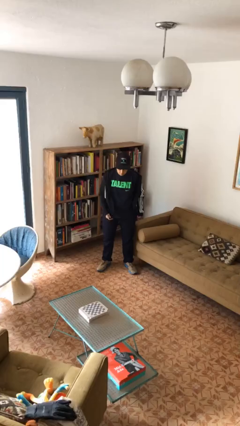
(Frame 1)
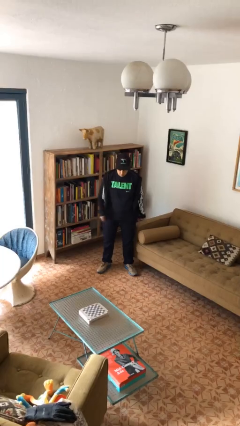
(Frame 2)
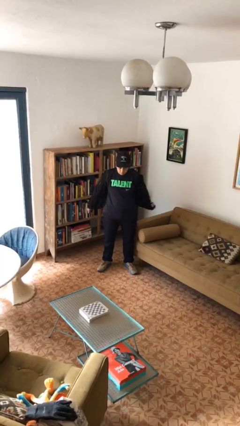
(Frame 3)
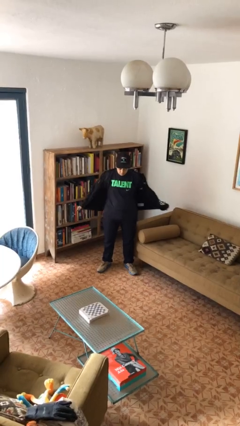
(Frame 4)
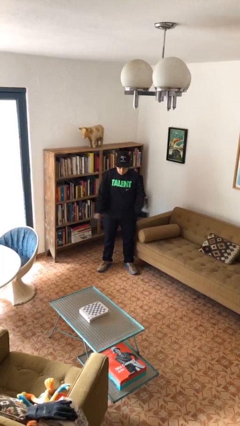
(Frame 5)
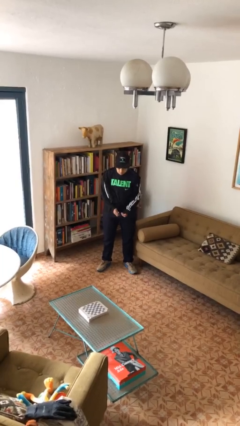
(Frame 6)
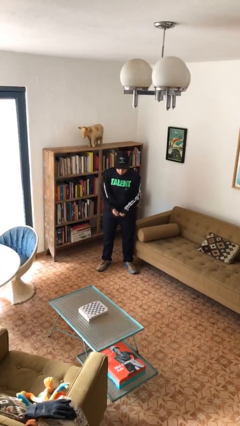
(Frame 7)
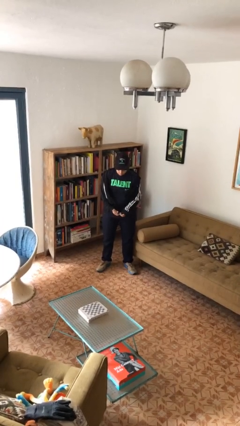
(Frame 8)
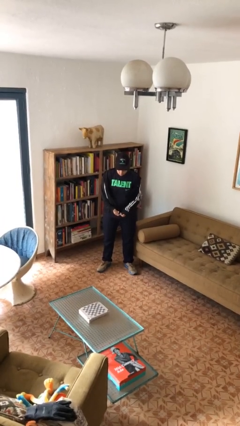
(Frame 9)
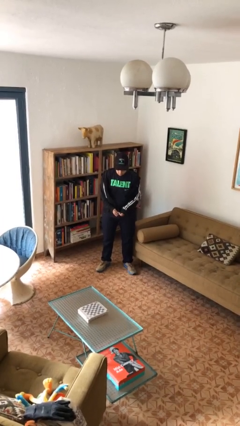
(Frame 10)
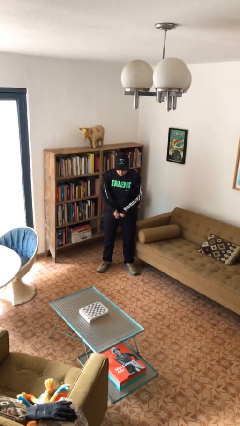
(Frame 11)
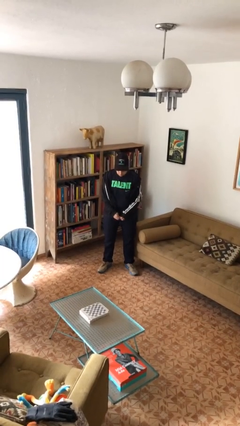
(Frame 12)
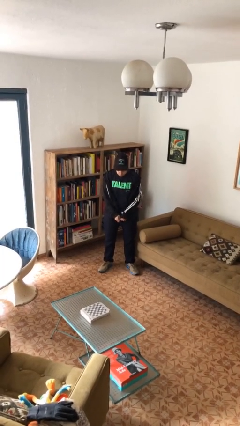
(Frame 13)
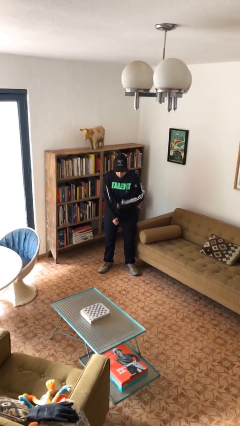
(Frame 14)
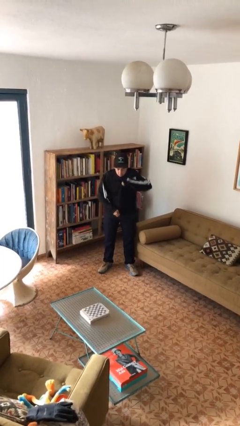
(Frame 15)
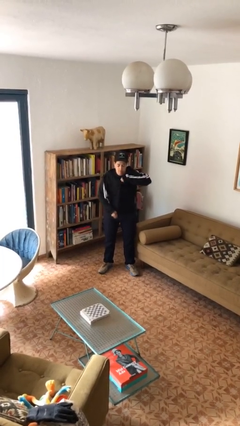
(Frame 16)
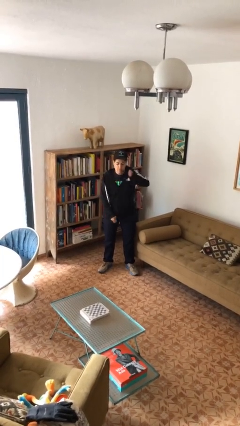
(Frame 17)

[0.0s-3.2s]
person zips up jacket

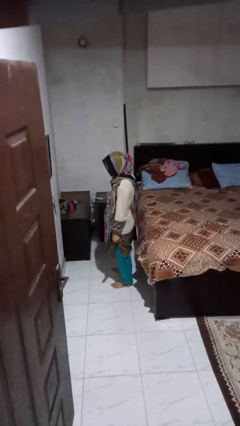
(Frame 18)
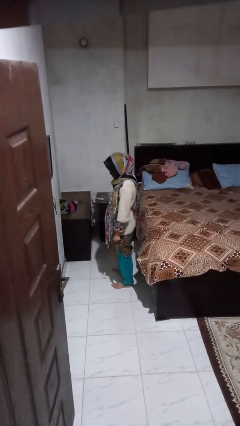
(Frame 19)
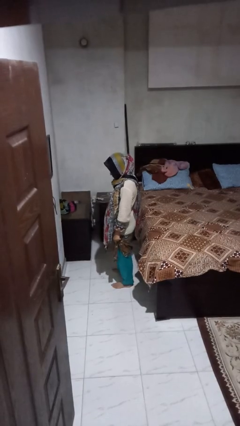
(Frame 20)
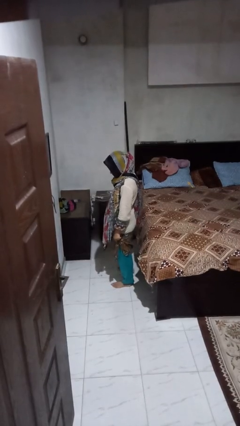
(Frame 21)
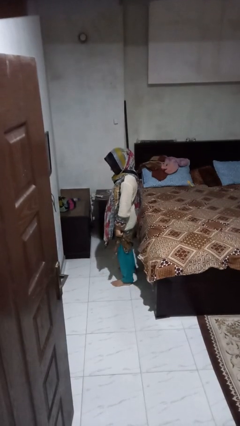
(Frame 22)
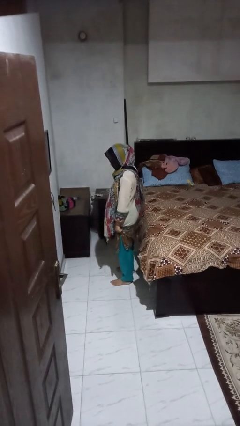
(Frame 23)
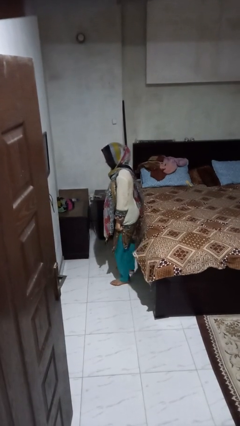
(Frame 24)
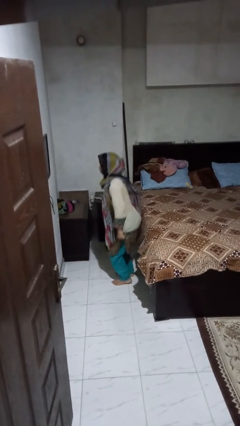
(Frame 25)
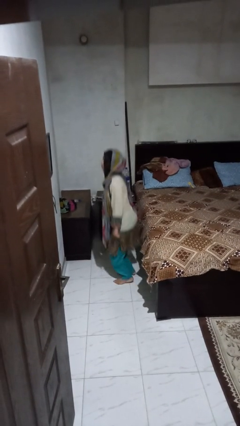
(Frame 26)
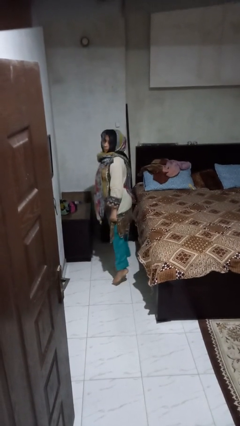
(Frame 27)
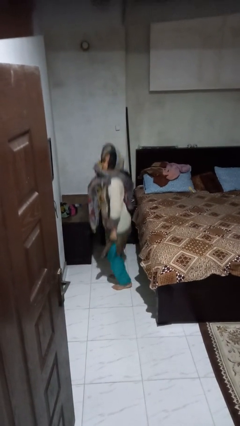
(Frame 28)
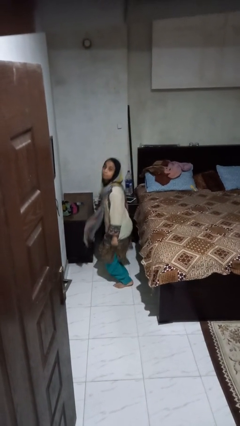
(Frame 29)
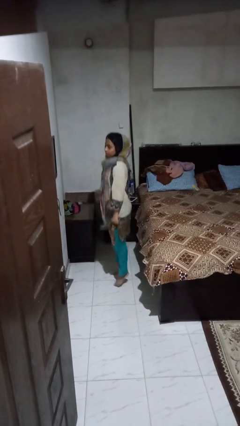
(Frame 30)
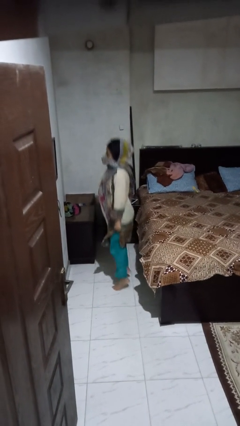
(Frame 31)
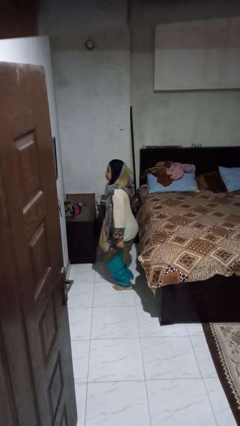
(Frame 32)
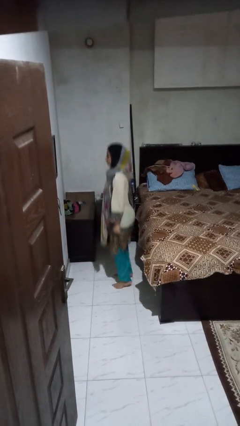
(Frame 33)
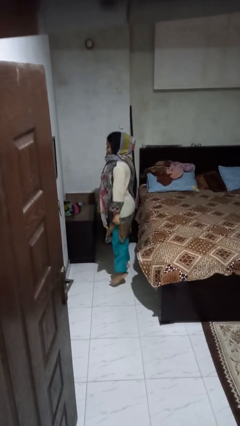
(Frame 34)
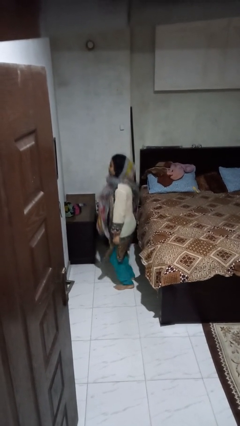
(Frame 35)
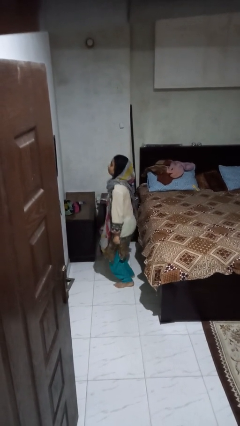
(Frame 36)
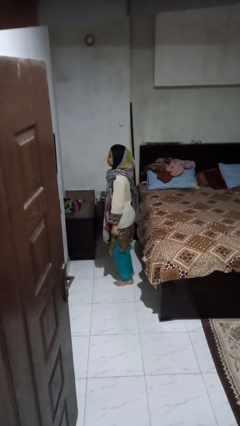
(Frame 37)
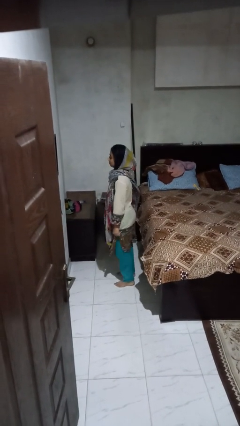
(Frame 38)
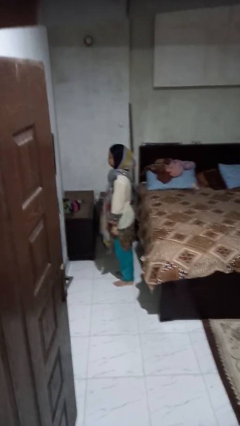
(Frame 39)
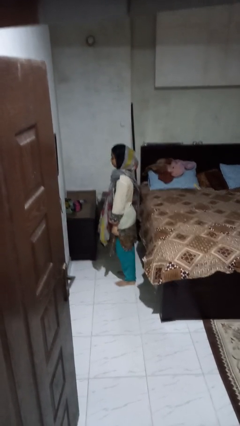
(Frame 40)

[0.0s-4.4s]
person jumps

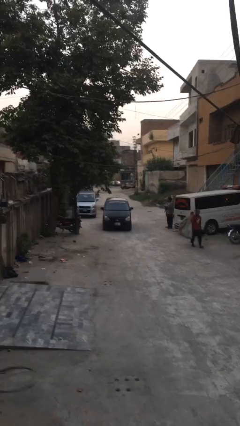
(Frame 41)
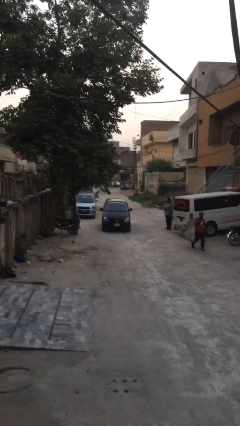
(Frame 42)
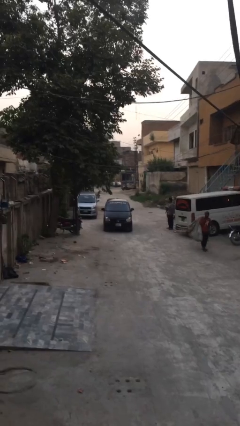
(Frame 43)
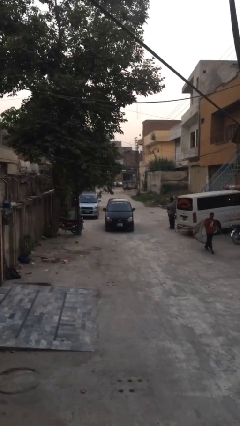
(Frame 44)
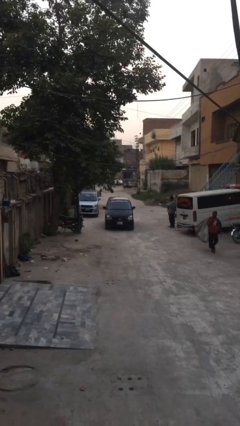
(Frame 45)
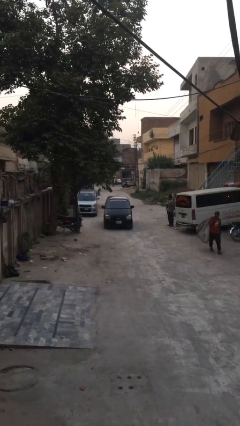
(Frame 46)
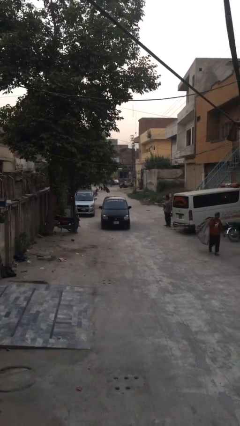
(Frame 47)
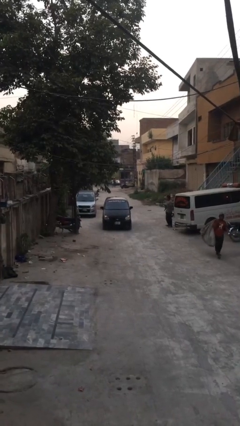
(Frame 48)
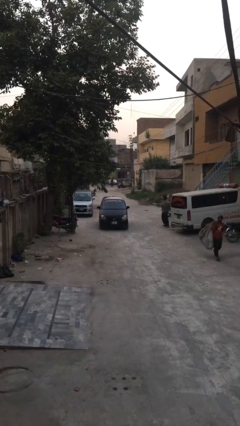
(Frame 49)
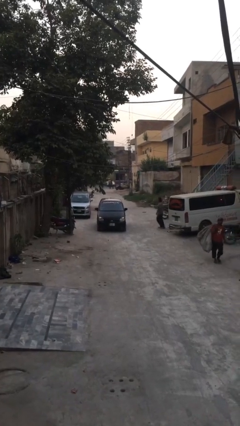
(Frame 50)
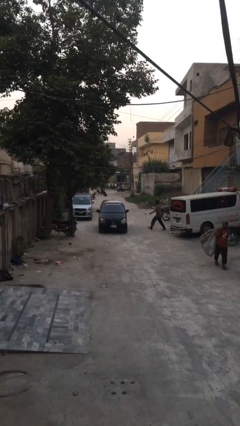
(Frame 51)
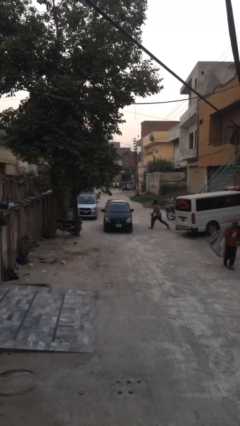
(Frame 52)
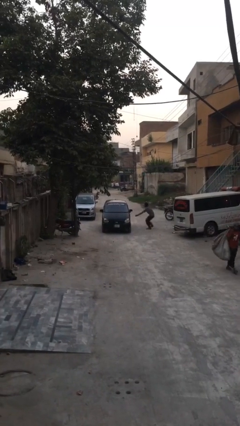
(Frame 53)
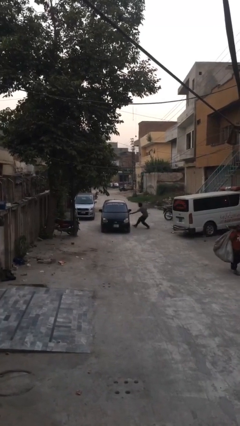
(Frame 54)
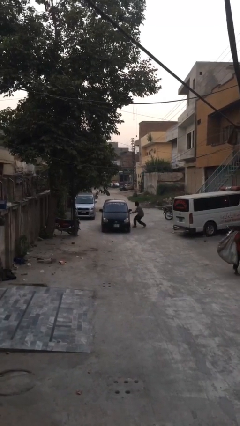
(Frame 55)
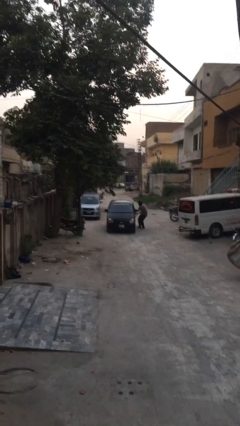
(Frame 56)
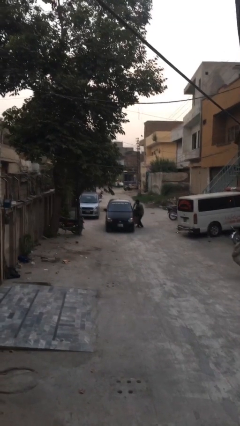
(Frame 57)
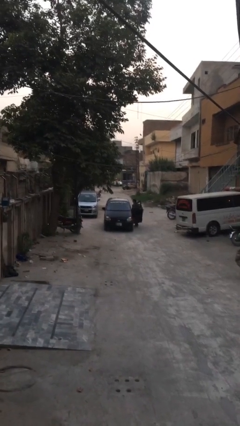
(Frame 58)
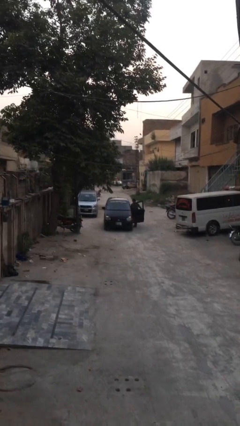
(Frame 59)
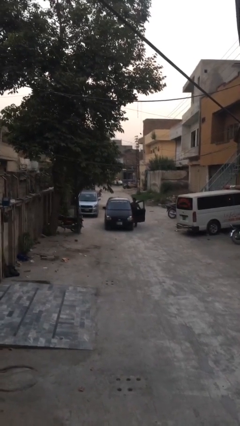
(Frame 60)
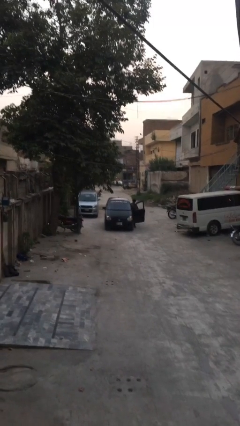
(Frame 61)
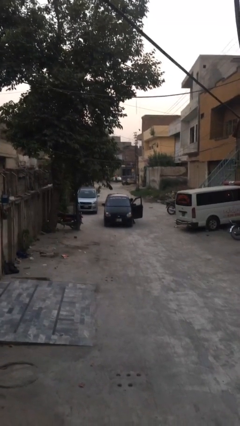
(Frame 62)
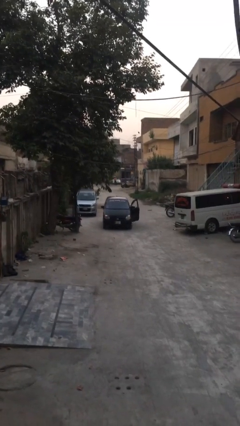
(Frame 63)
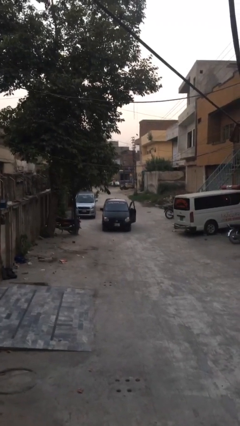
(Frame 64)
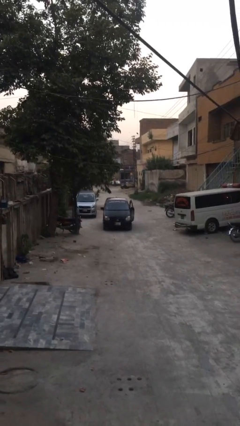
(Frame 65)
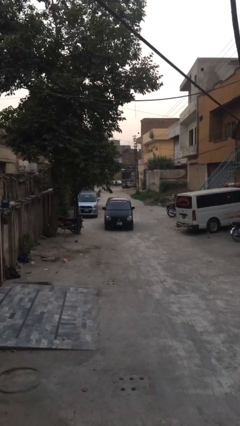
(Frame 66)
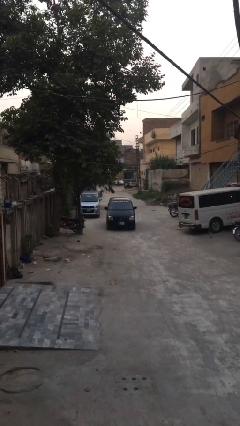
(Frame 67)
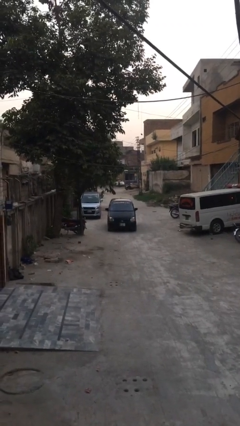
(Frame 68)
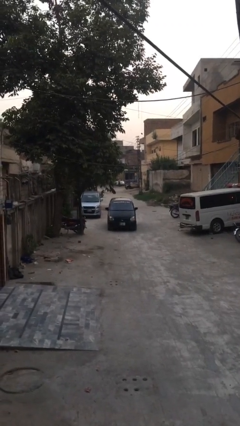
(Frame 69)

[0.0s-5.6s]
car picks up person

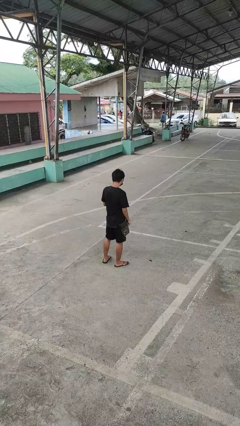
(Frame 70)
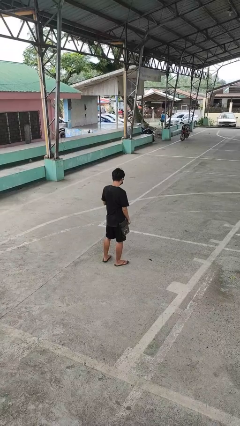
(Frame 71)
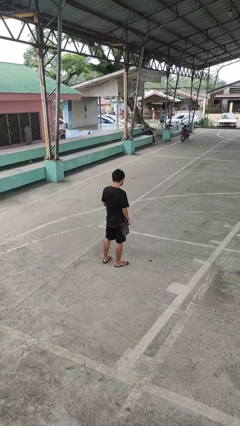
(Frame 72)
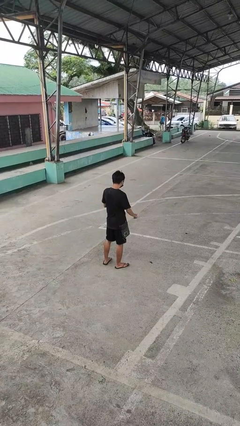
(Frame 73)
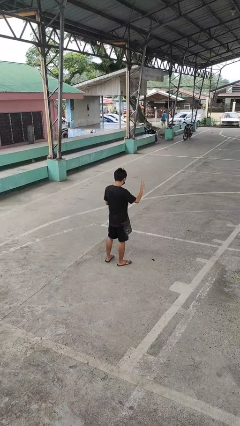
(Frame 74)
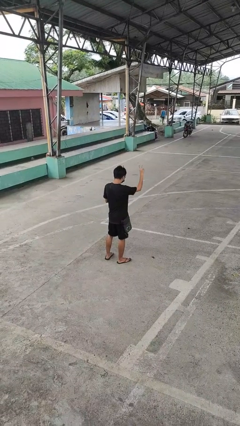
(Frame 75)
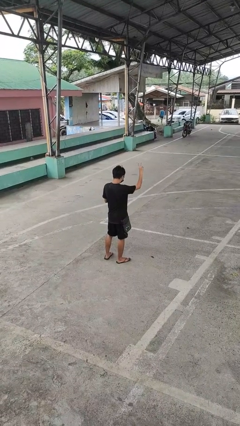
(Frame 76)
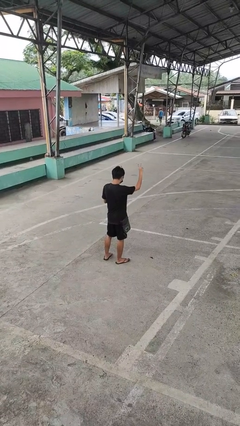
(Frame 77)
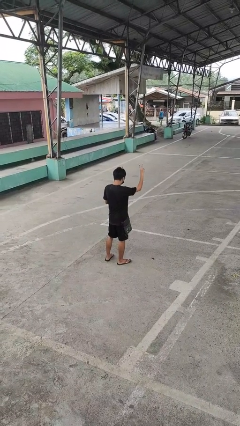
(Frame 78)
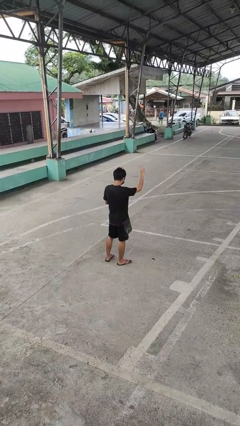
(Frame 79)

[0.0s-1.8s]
person gestures peace

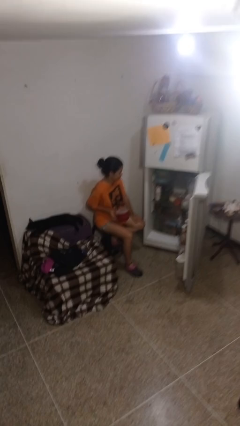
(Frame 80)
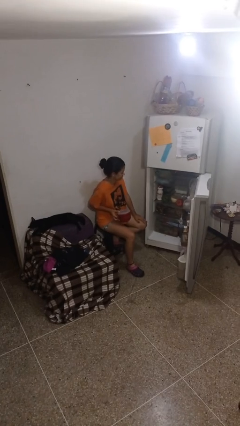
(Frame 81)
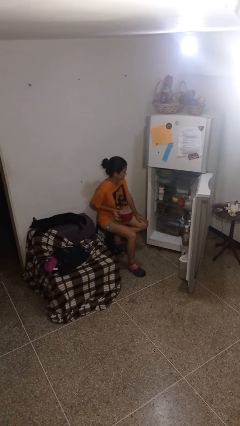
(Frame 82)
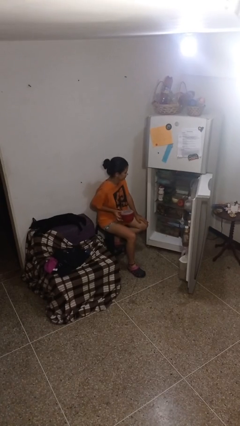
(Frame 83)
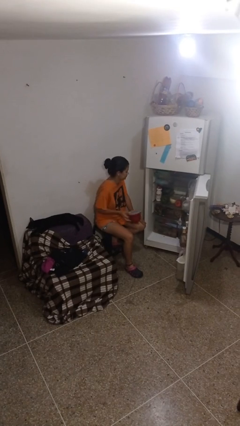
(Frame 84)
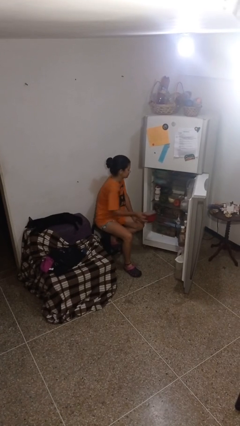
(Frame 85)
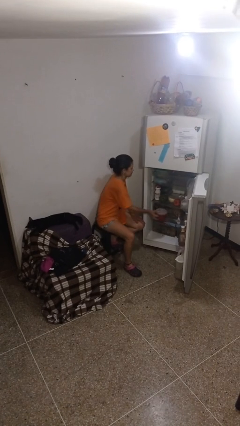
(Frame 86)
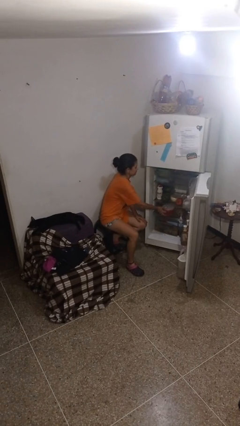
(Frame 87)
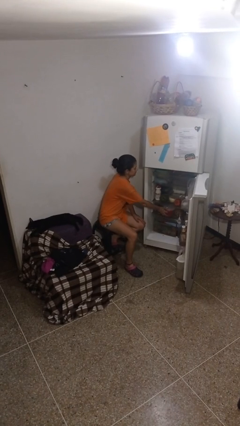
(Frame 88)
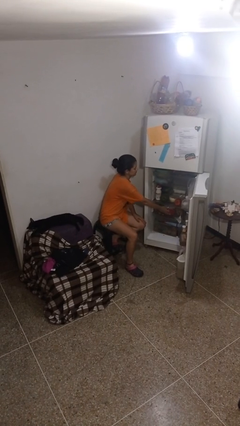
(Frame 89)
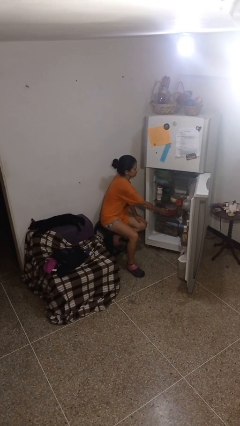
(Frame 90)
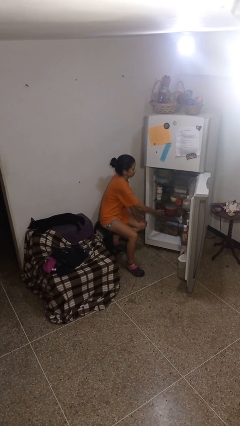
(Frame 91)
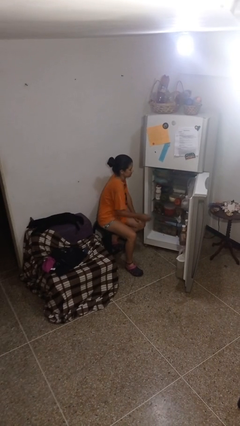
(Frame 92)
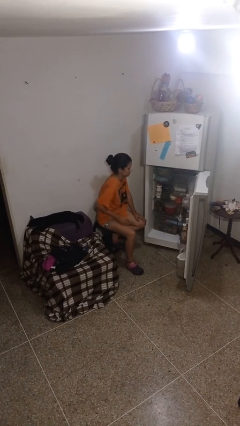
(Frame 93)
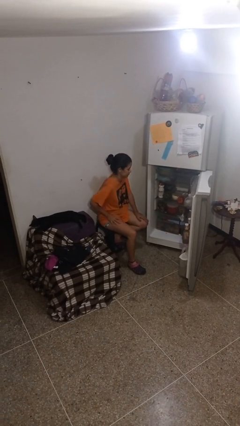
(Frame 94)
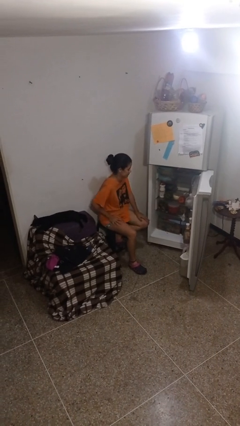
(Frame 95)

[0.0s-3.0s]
person puts object into refrigerator
